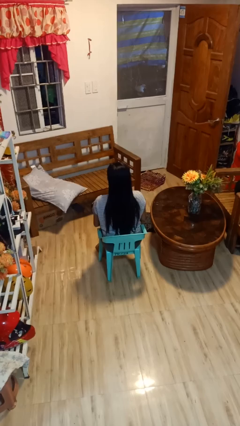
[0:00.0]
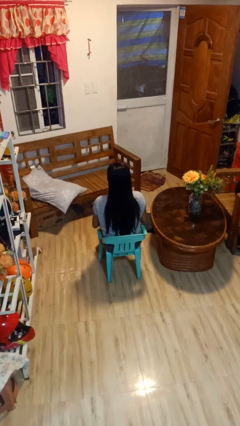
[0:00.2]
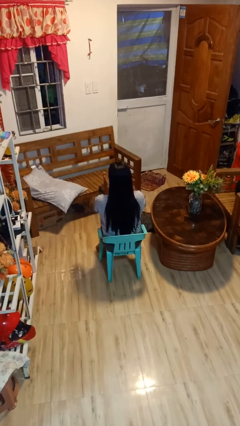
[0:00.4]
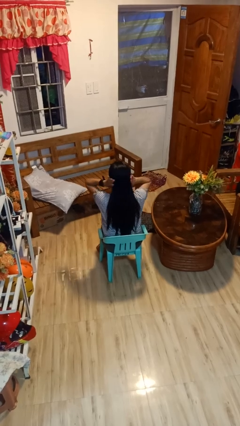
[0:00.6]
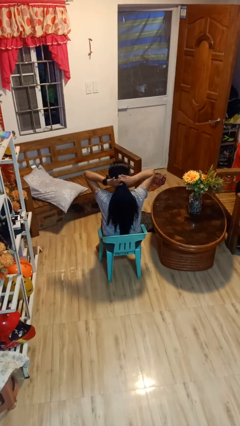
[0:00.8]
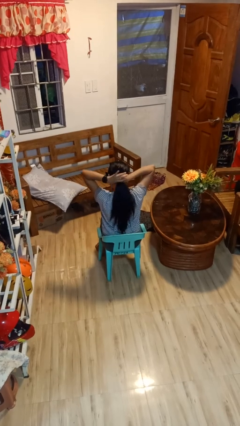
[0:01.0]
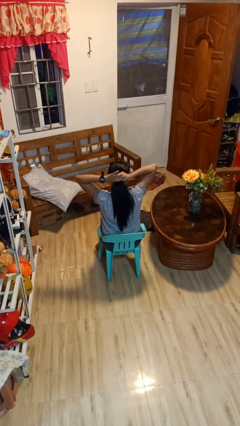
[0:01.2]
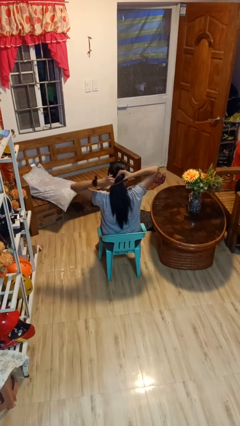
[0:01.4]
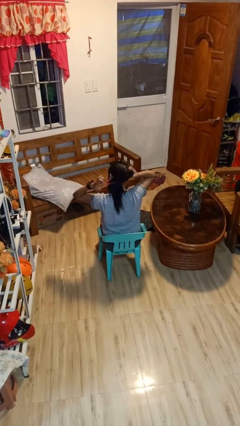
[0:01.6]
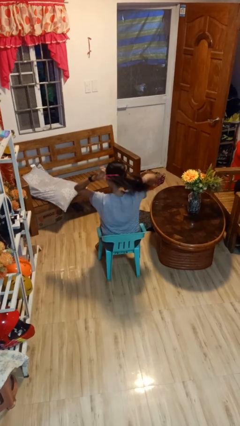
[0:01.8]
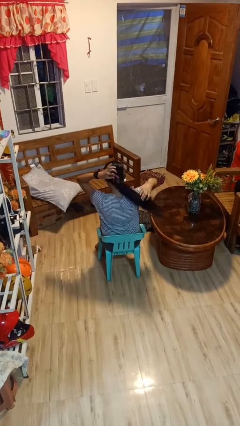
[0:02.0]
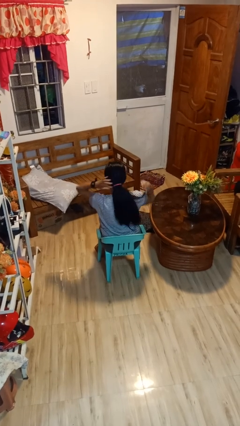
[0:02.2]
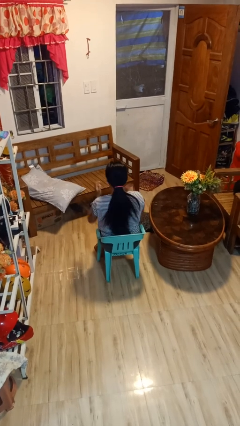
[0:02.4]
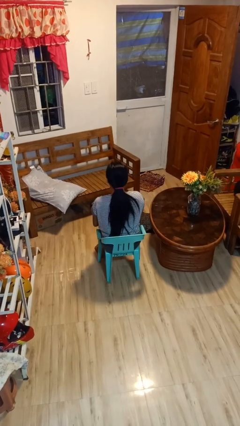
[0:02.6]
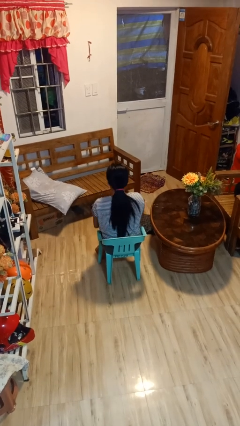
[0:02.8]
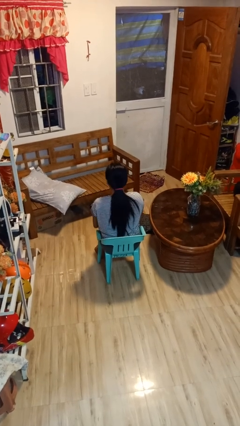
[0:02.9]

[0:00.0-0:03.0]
person puts hair in ponytail

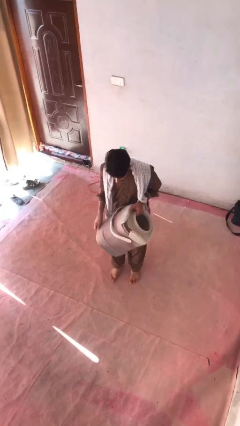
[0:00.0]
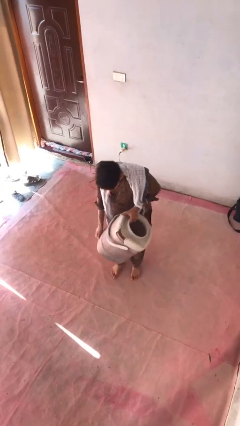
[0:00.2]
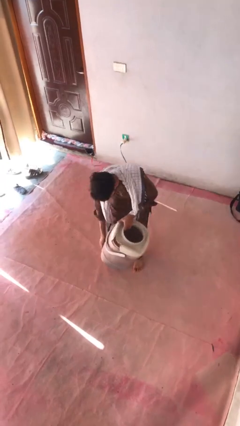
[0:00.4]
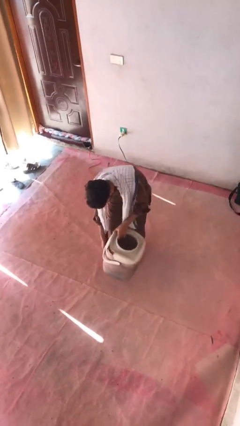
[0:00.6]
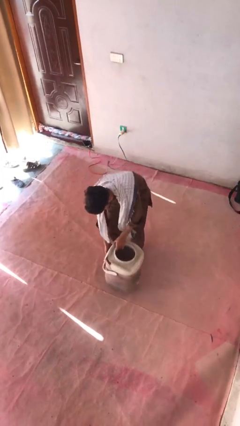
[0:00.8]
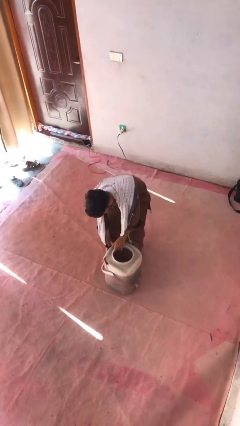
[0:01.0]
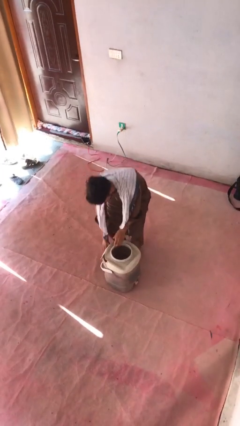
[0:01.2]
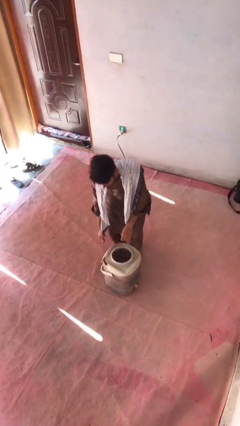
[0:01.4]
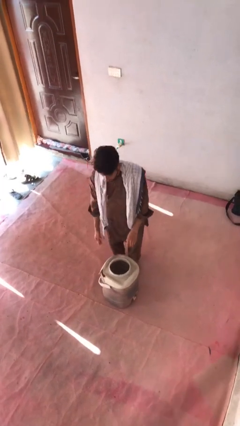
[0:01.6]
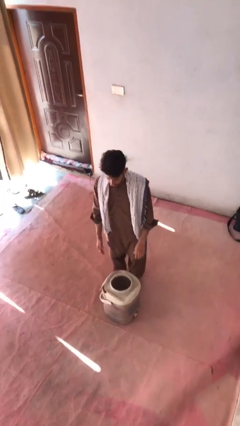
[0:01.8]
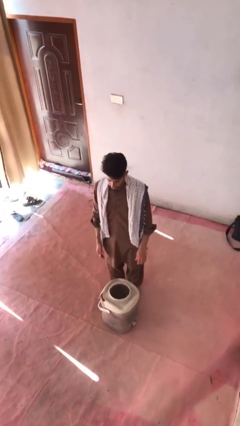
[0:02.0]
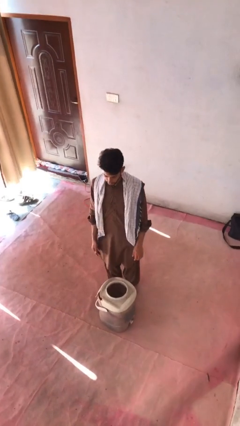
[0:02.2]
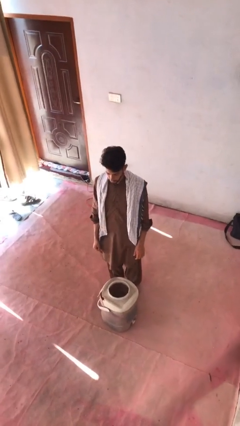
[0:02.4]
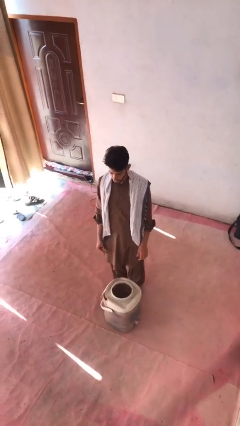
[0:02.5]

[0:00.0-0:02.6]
person puts down object on floor

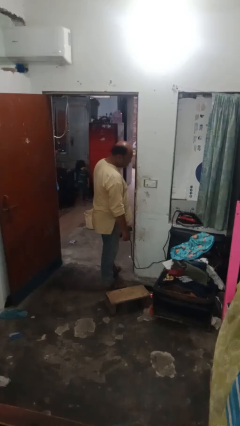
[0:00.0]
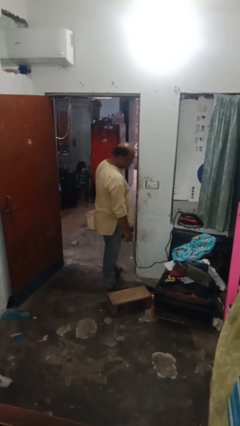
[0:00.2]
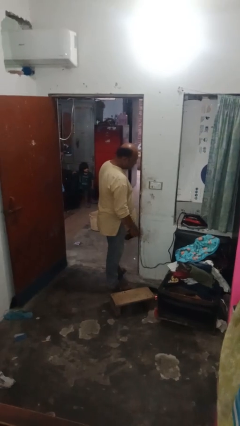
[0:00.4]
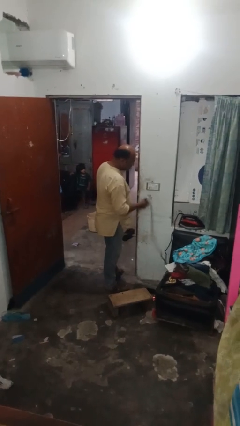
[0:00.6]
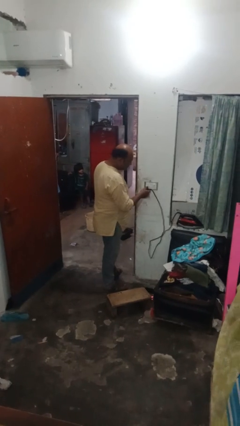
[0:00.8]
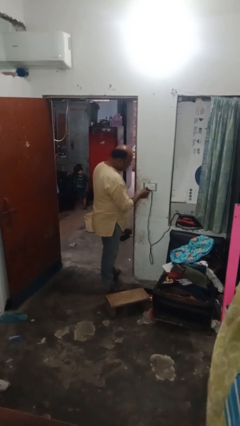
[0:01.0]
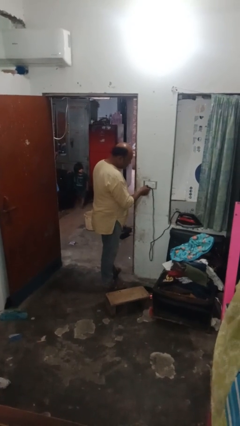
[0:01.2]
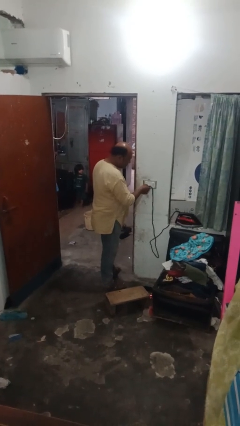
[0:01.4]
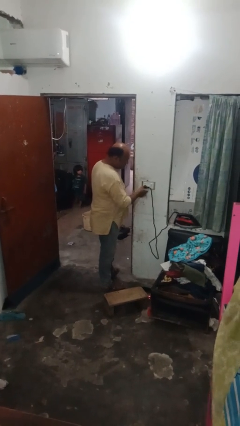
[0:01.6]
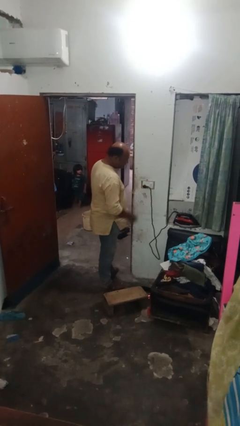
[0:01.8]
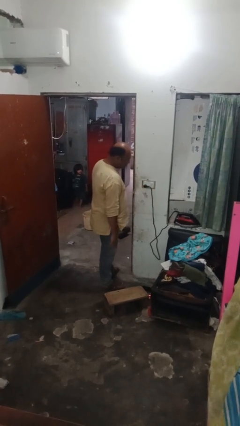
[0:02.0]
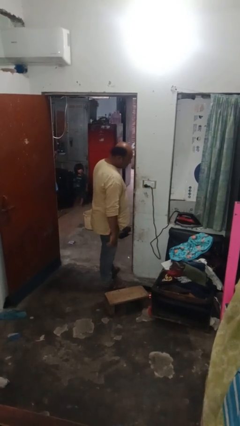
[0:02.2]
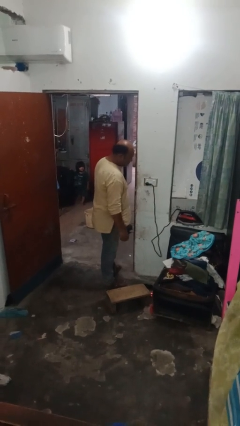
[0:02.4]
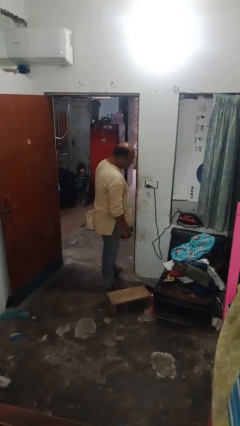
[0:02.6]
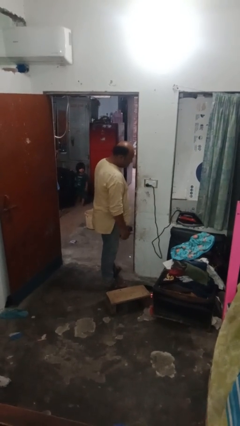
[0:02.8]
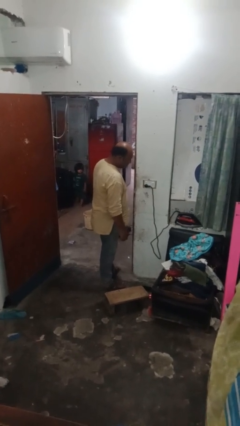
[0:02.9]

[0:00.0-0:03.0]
person plugs into electrical socket

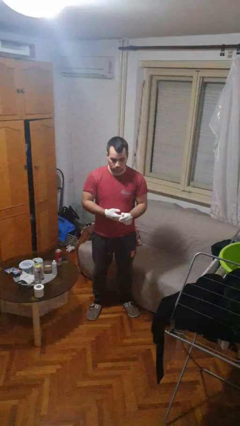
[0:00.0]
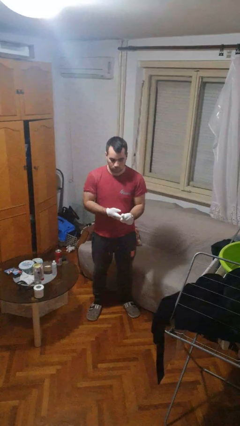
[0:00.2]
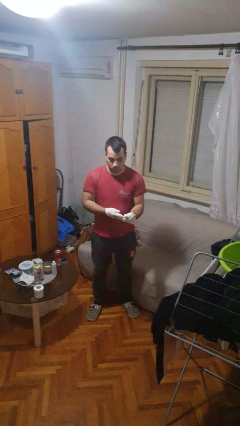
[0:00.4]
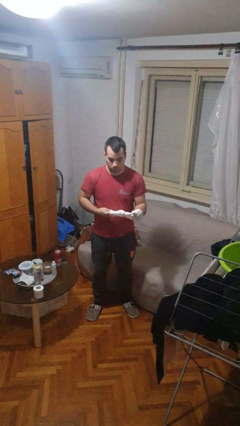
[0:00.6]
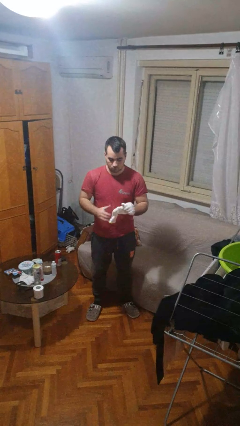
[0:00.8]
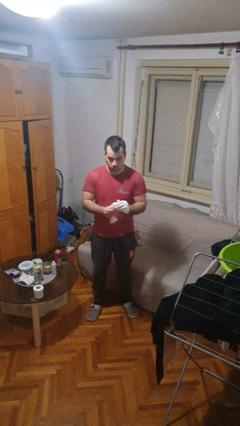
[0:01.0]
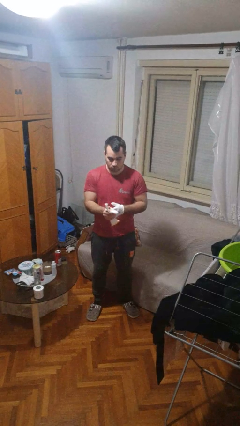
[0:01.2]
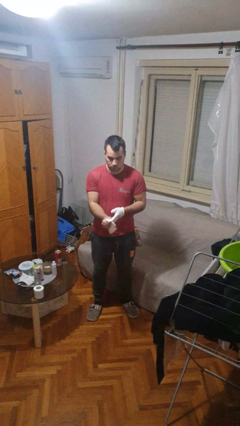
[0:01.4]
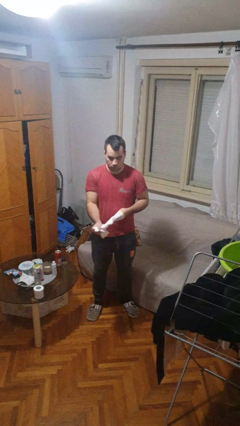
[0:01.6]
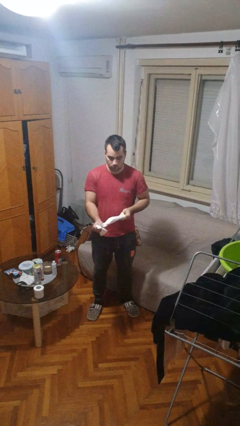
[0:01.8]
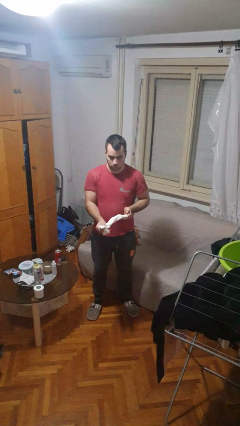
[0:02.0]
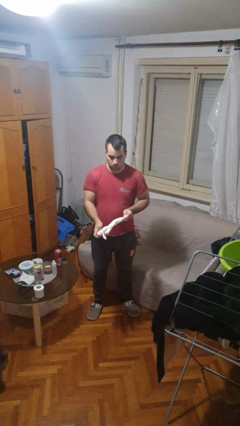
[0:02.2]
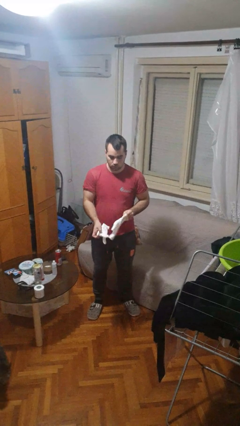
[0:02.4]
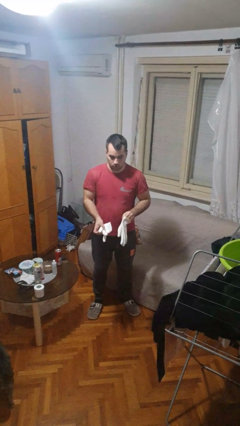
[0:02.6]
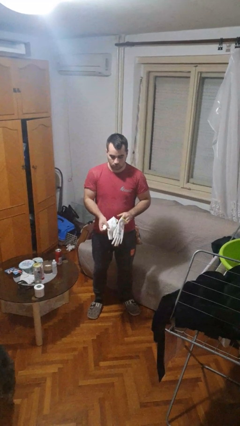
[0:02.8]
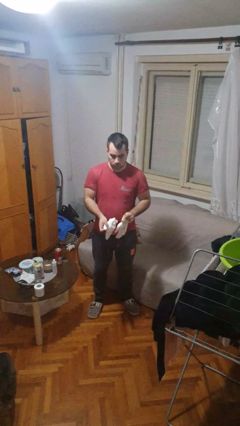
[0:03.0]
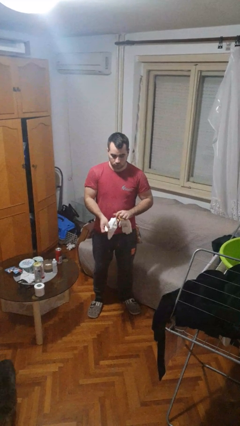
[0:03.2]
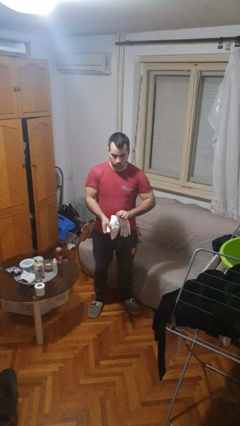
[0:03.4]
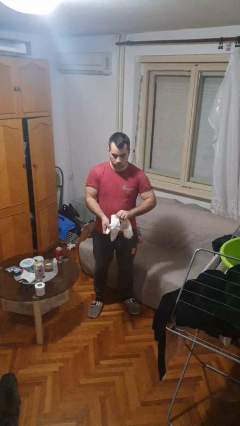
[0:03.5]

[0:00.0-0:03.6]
person takes off gloves

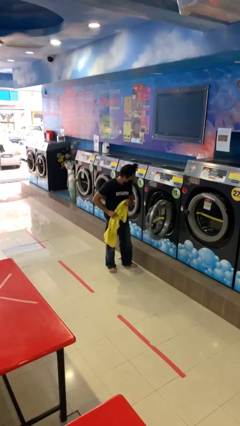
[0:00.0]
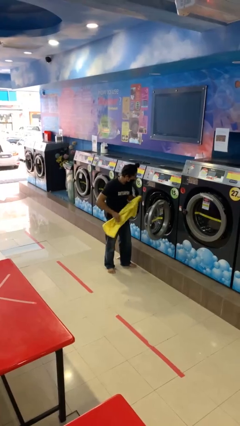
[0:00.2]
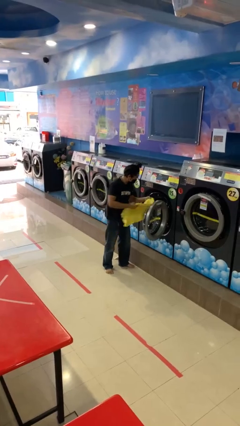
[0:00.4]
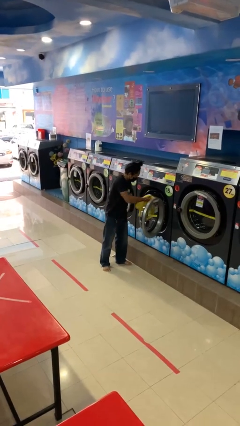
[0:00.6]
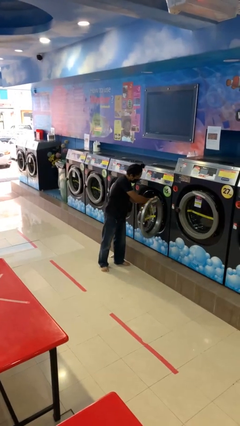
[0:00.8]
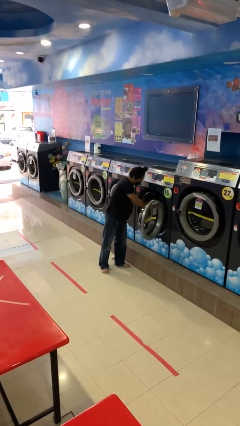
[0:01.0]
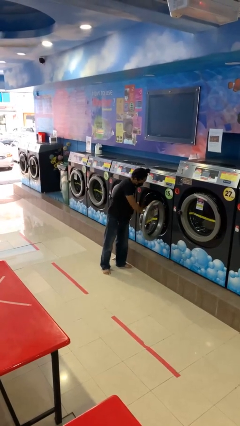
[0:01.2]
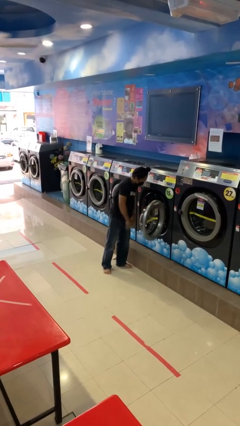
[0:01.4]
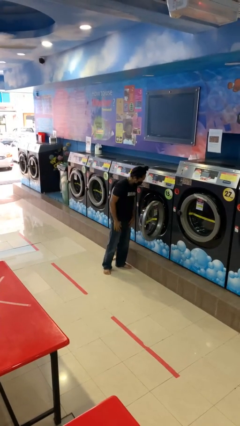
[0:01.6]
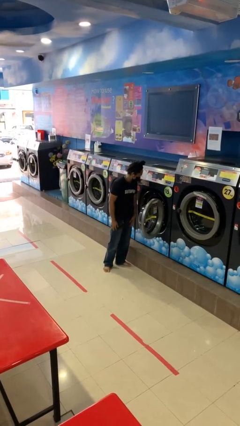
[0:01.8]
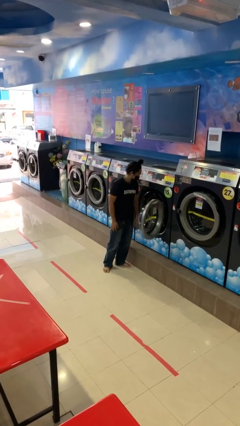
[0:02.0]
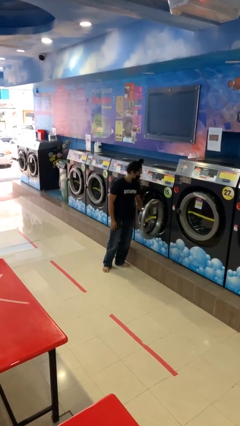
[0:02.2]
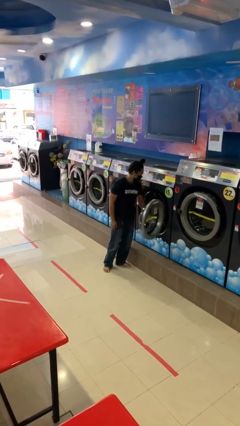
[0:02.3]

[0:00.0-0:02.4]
person loads clotheswasher

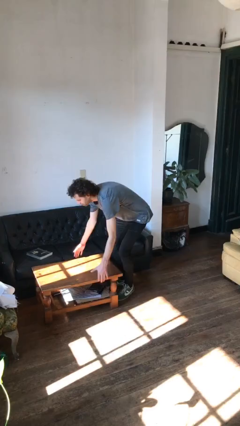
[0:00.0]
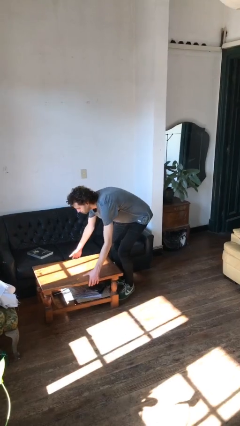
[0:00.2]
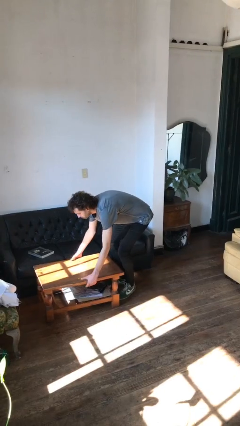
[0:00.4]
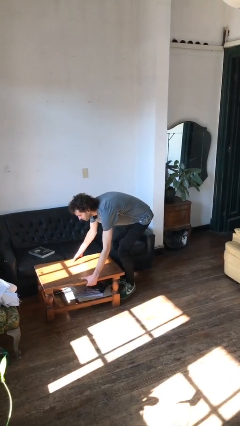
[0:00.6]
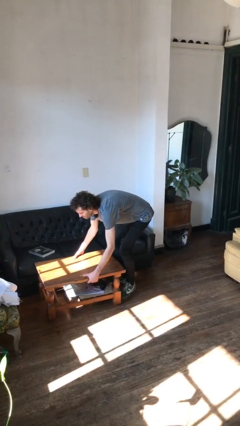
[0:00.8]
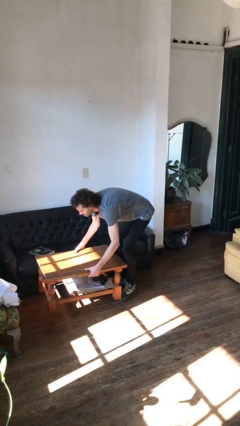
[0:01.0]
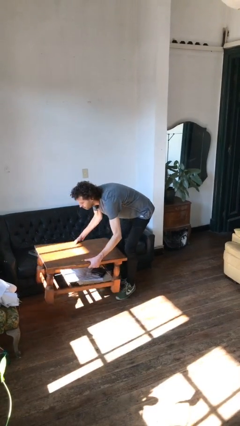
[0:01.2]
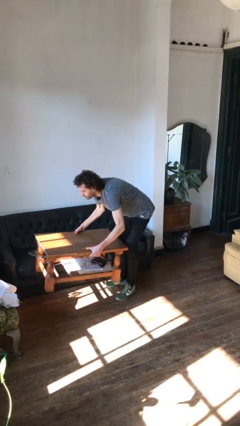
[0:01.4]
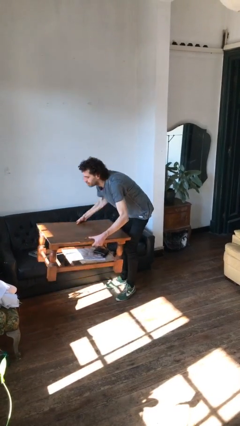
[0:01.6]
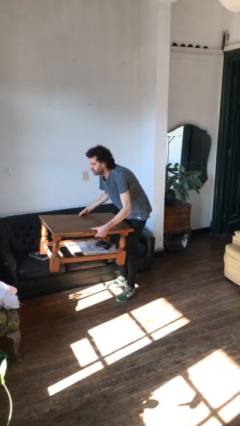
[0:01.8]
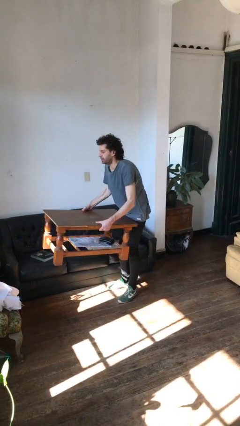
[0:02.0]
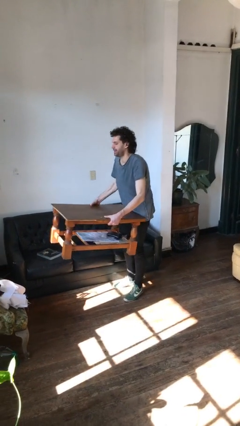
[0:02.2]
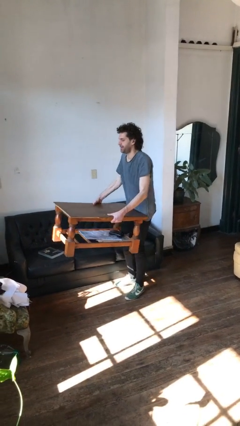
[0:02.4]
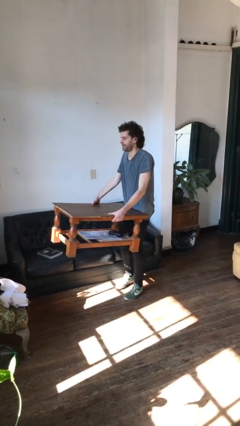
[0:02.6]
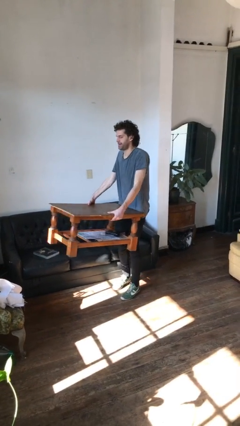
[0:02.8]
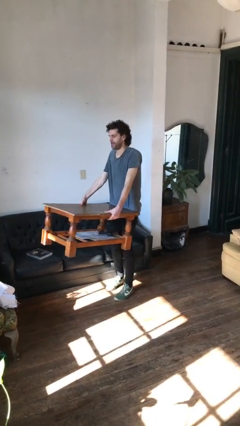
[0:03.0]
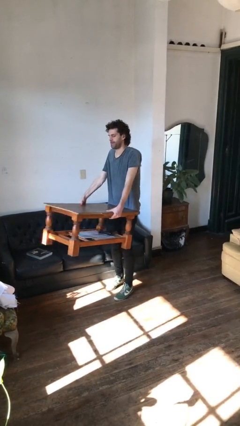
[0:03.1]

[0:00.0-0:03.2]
person picks up object from floor
